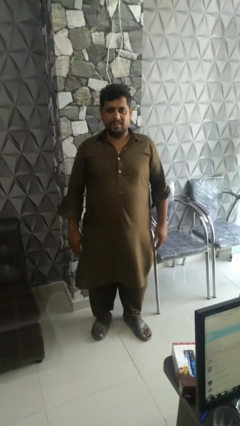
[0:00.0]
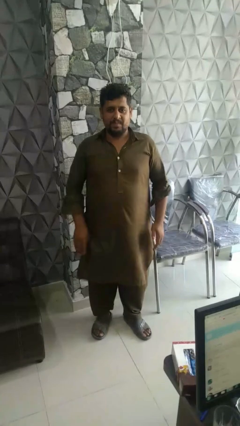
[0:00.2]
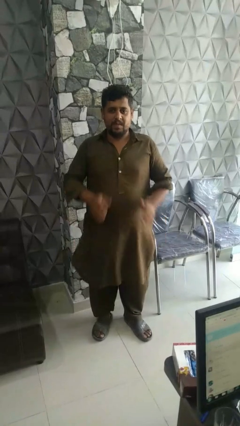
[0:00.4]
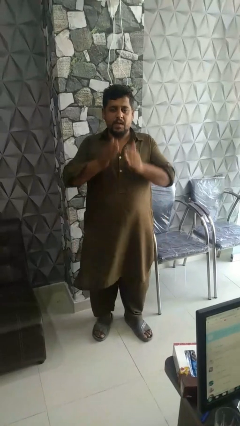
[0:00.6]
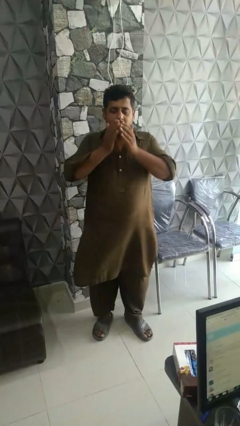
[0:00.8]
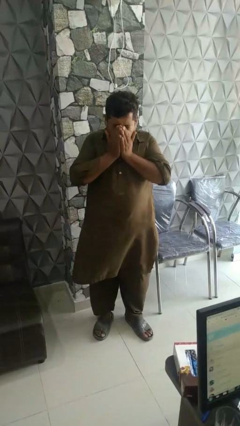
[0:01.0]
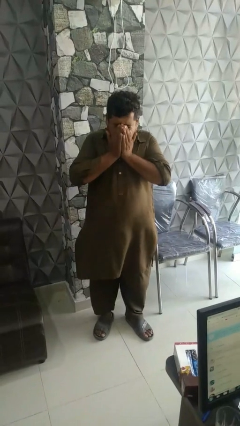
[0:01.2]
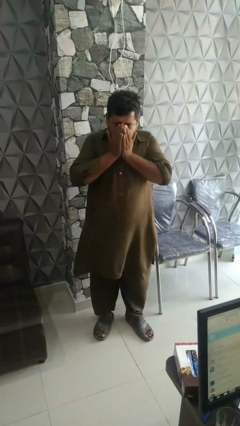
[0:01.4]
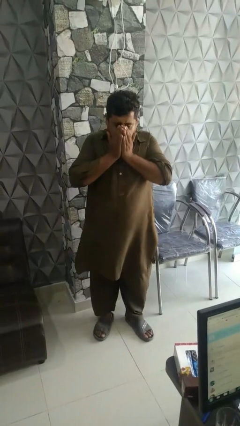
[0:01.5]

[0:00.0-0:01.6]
person sneezes into hand

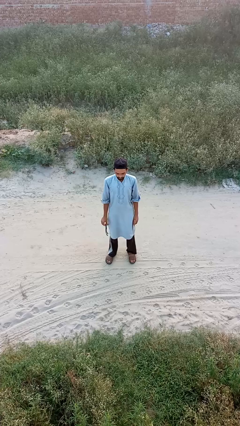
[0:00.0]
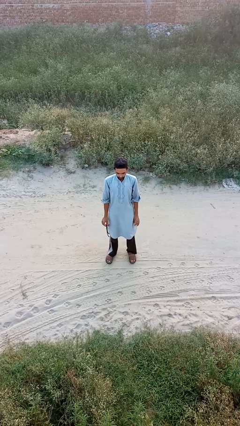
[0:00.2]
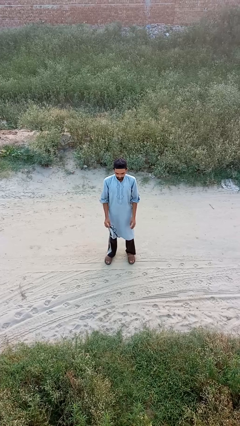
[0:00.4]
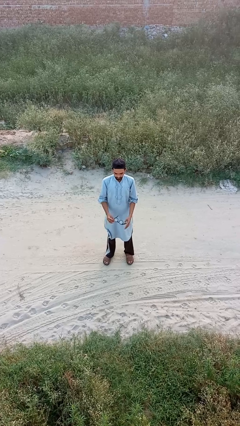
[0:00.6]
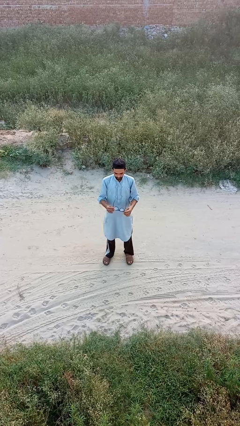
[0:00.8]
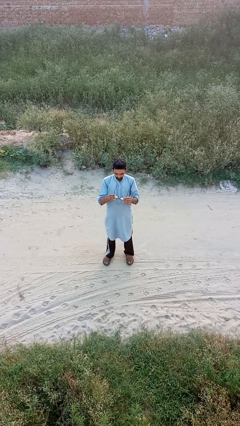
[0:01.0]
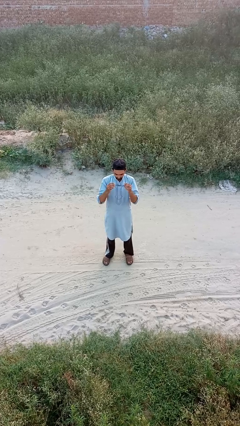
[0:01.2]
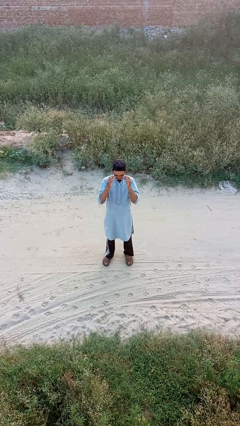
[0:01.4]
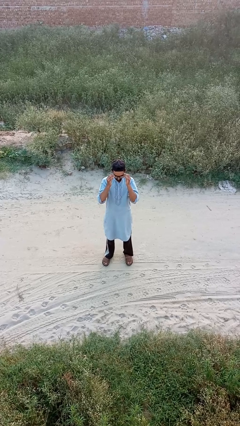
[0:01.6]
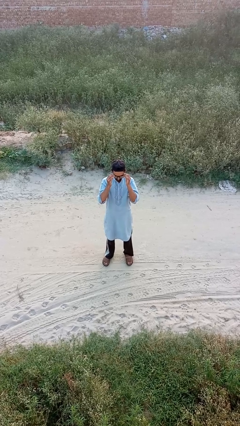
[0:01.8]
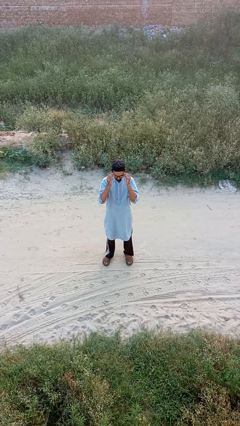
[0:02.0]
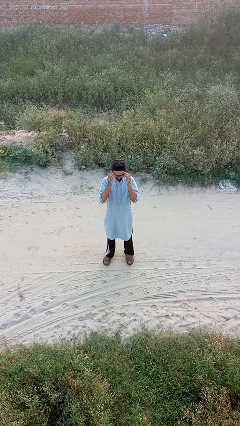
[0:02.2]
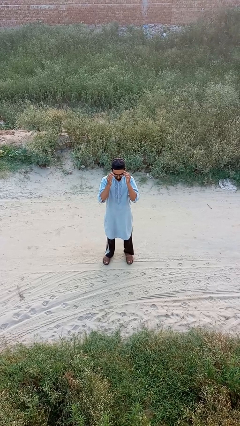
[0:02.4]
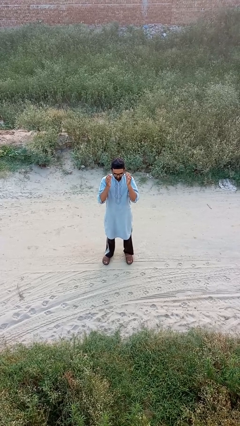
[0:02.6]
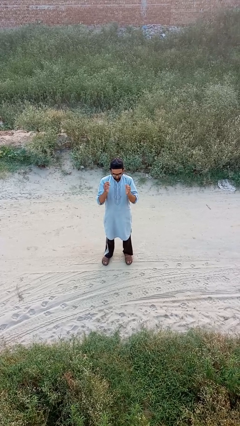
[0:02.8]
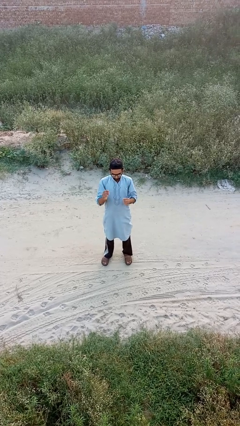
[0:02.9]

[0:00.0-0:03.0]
person puts on glasses

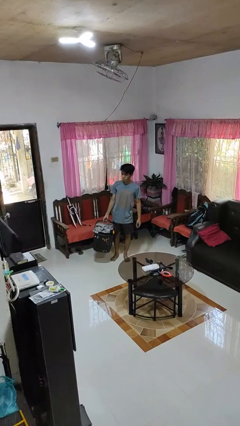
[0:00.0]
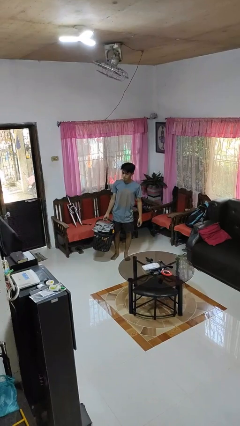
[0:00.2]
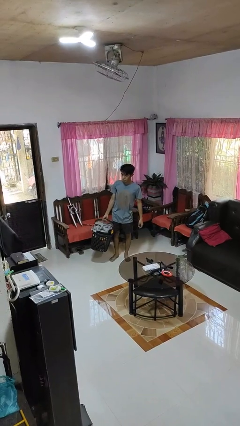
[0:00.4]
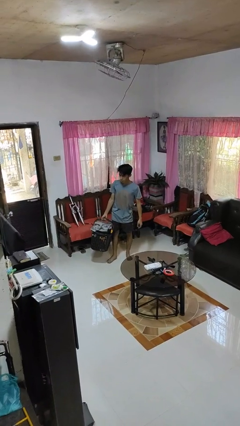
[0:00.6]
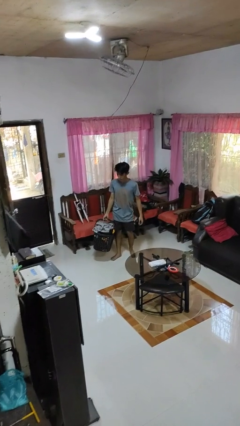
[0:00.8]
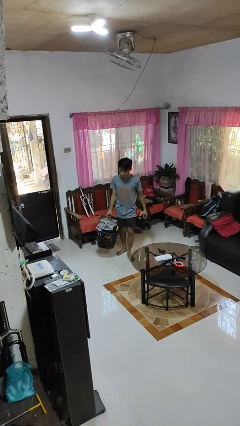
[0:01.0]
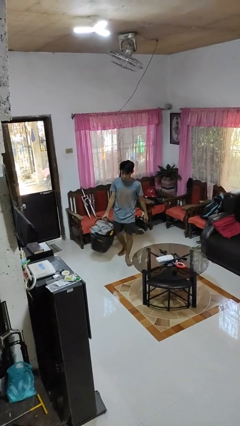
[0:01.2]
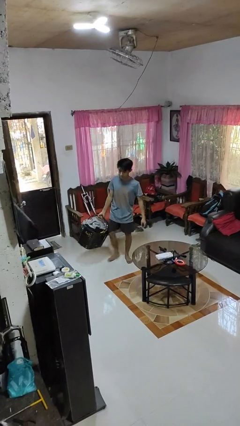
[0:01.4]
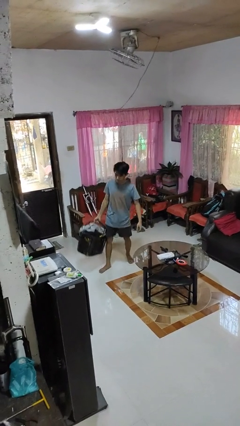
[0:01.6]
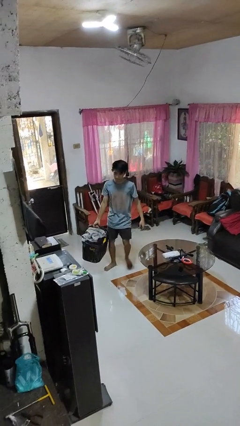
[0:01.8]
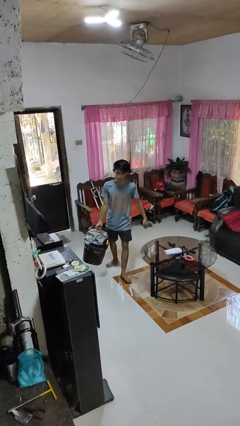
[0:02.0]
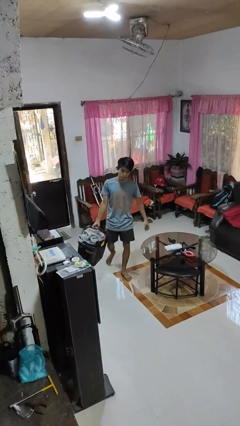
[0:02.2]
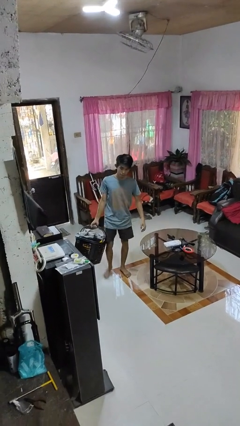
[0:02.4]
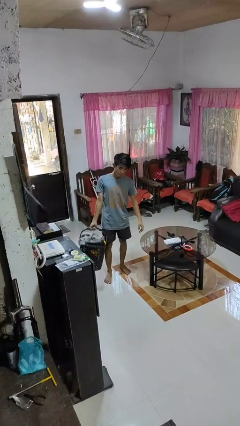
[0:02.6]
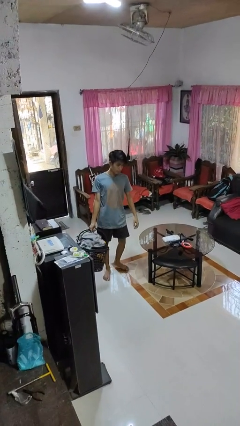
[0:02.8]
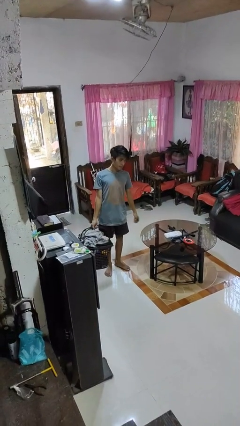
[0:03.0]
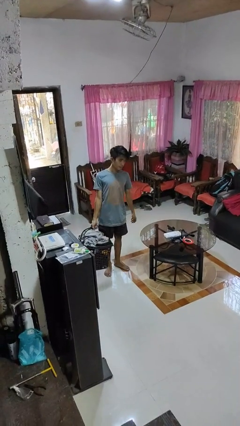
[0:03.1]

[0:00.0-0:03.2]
person carries laundry basket

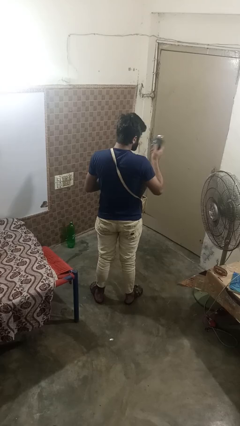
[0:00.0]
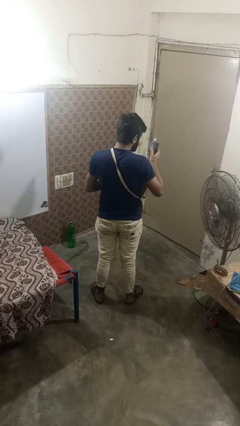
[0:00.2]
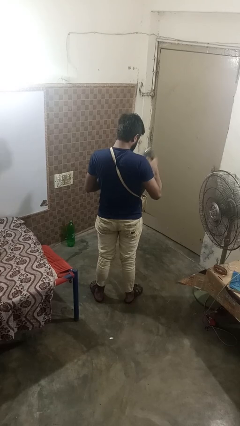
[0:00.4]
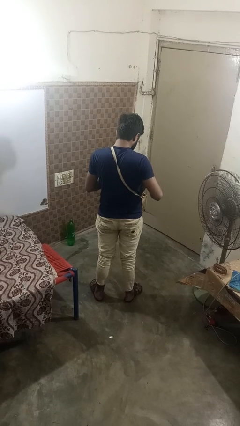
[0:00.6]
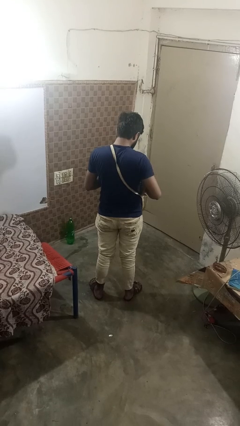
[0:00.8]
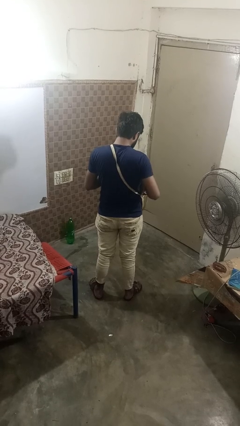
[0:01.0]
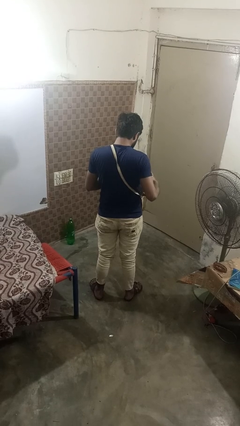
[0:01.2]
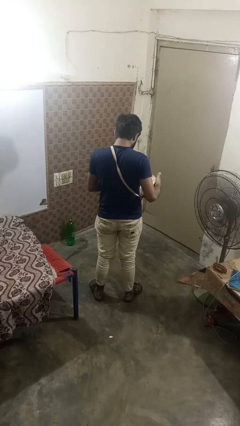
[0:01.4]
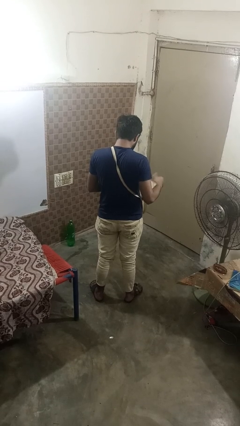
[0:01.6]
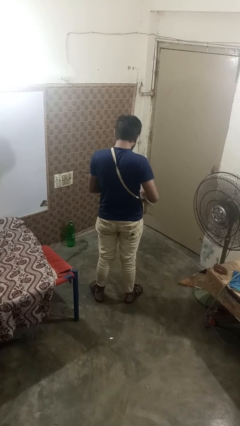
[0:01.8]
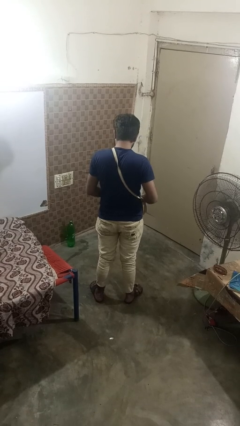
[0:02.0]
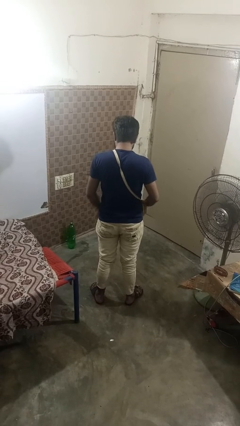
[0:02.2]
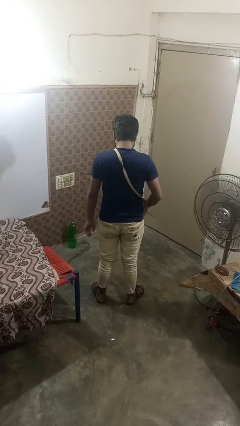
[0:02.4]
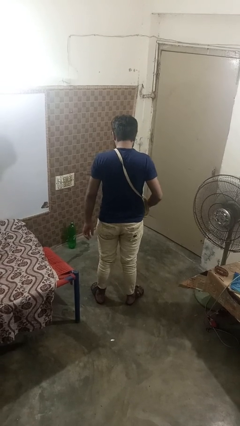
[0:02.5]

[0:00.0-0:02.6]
person puts object into purse

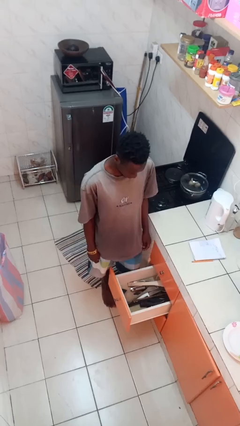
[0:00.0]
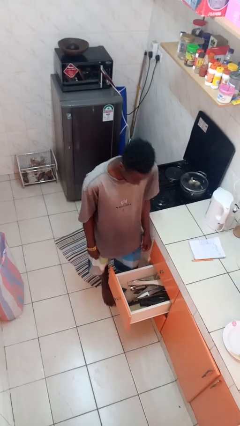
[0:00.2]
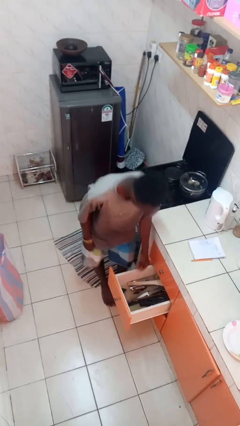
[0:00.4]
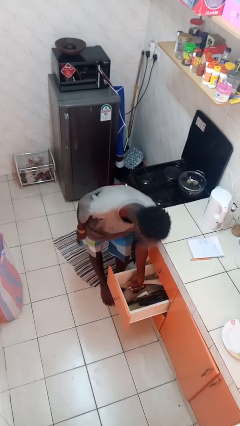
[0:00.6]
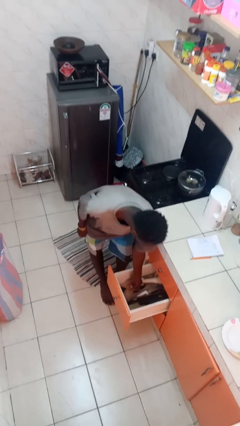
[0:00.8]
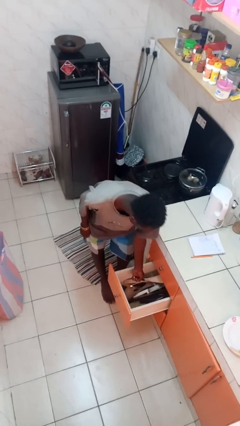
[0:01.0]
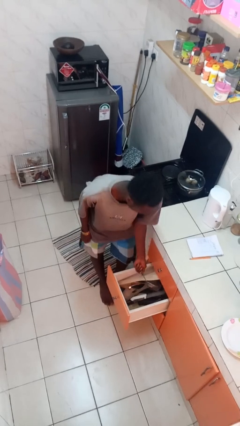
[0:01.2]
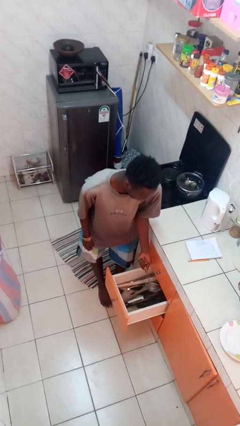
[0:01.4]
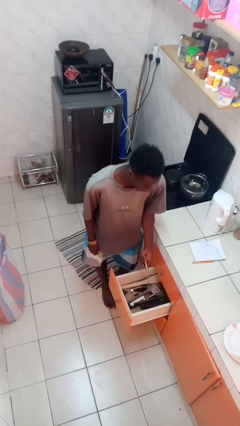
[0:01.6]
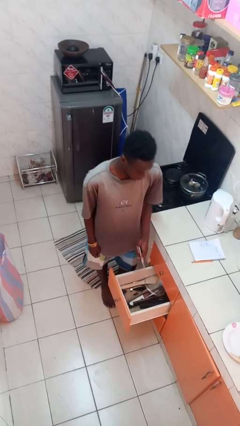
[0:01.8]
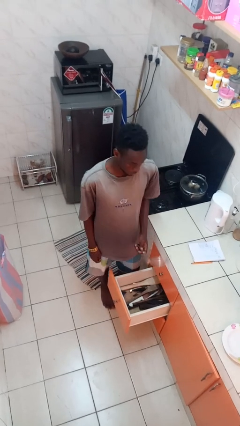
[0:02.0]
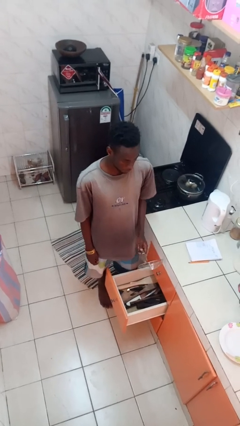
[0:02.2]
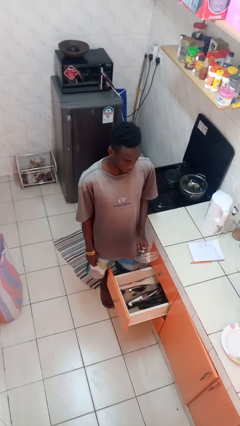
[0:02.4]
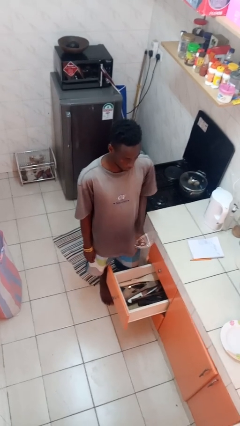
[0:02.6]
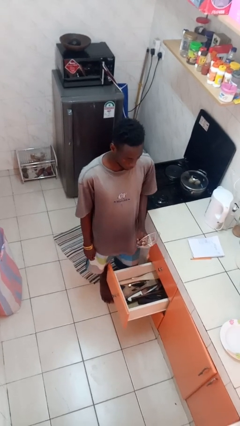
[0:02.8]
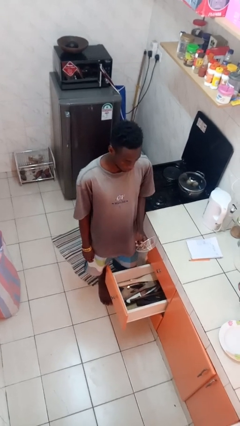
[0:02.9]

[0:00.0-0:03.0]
person takes object from kitchen drawer

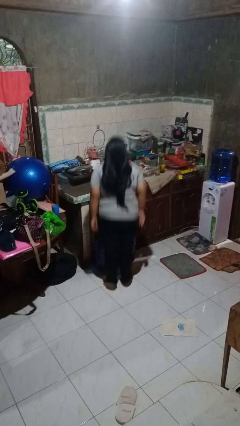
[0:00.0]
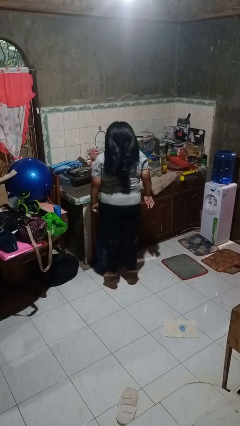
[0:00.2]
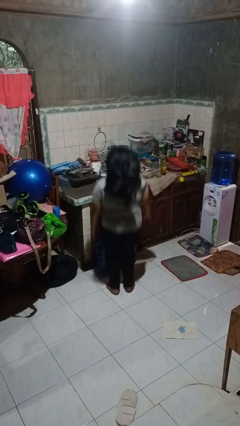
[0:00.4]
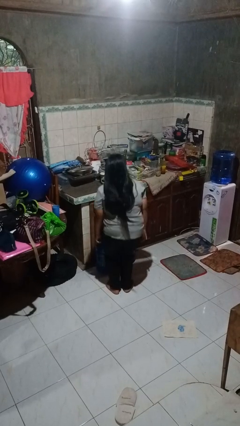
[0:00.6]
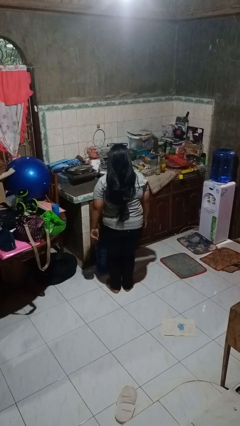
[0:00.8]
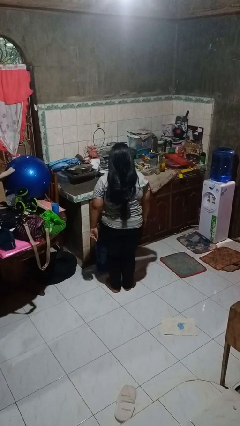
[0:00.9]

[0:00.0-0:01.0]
person jumps

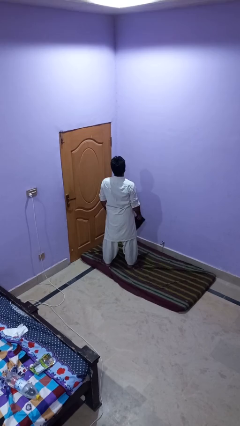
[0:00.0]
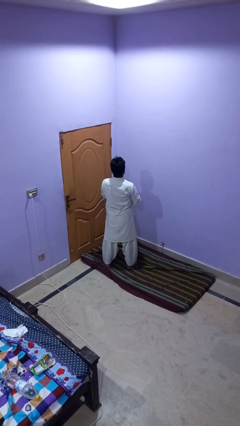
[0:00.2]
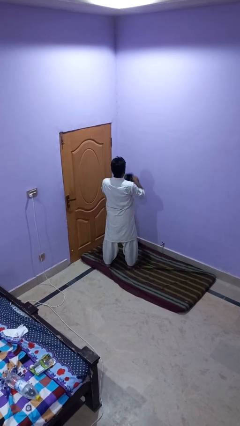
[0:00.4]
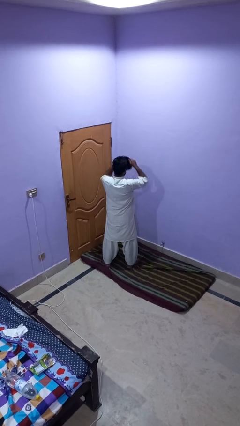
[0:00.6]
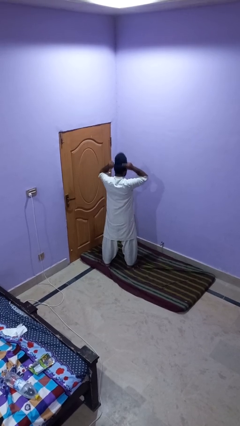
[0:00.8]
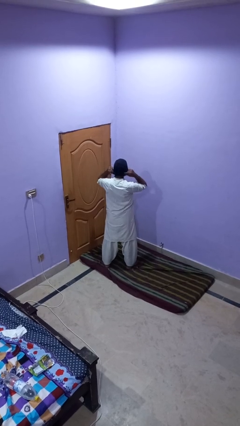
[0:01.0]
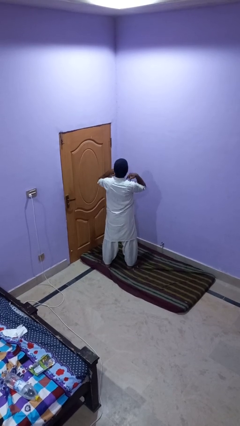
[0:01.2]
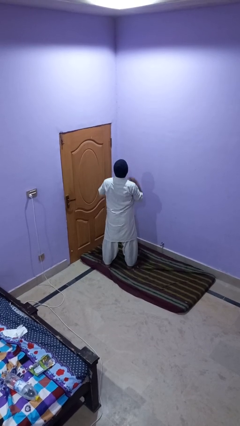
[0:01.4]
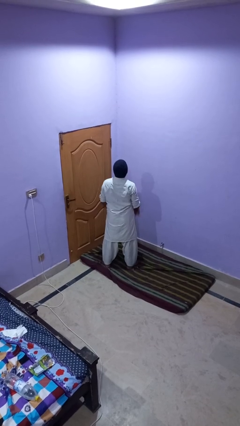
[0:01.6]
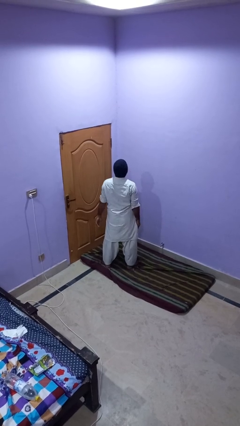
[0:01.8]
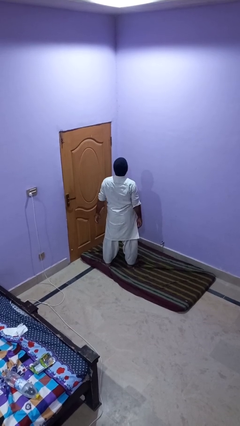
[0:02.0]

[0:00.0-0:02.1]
person puts on hat

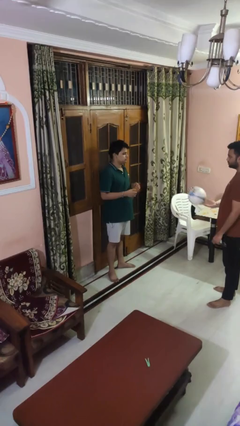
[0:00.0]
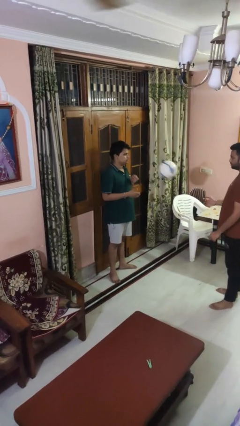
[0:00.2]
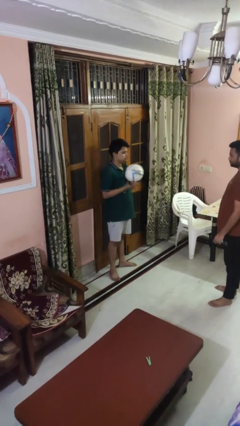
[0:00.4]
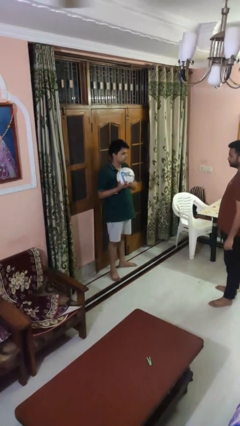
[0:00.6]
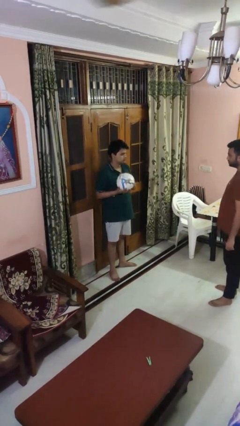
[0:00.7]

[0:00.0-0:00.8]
person catches object from person
